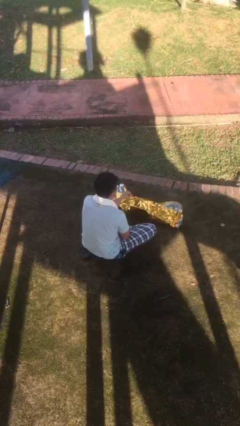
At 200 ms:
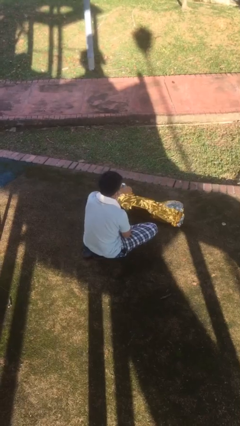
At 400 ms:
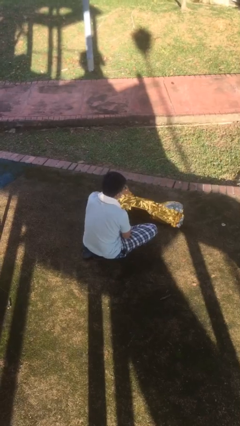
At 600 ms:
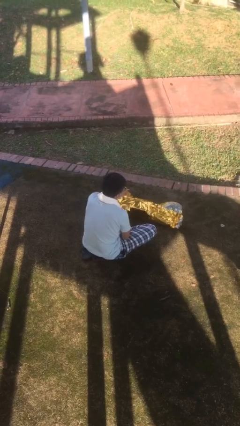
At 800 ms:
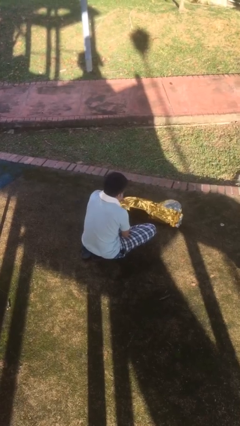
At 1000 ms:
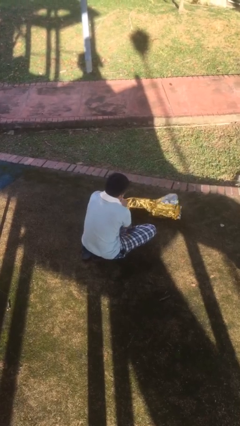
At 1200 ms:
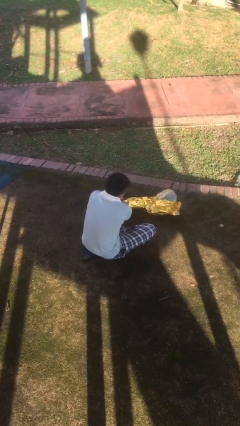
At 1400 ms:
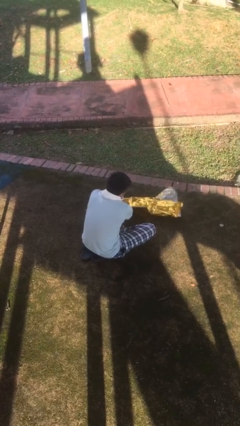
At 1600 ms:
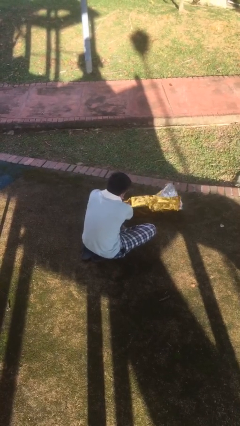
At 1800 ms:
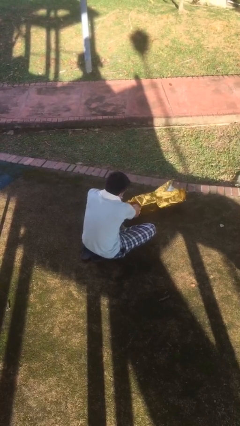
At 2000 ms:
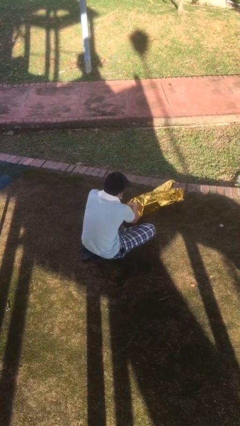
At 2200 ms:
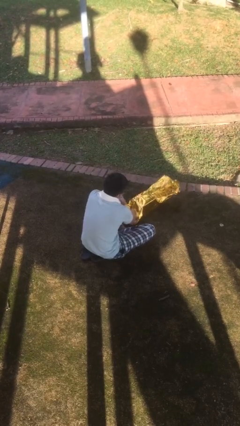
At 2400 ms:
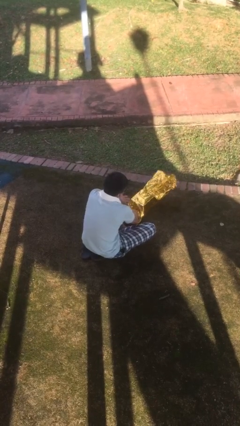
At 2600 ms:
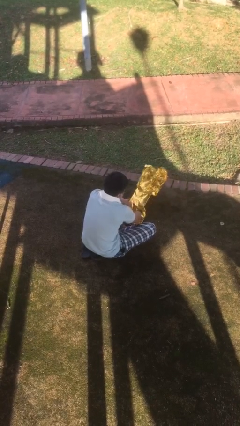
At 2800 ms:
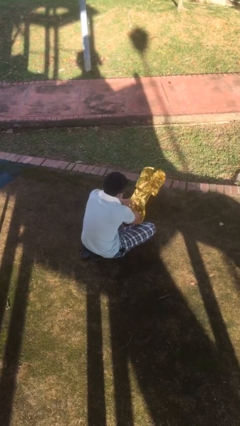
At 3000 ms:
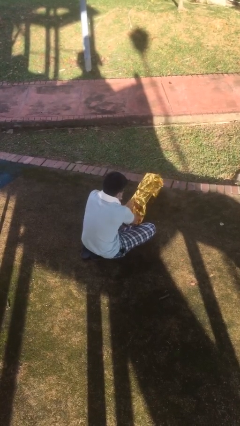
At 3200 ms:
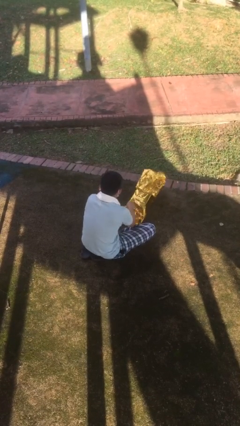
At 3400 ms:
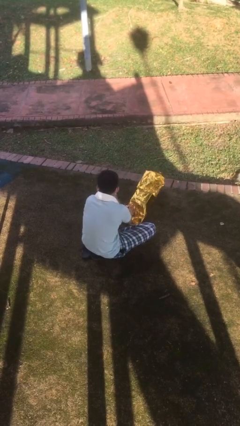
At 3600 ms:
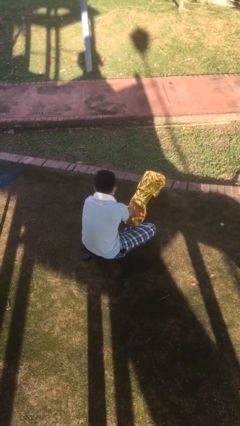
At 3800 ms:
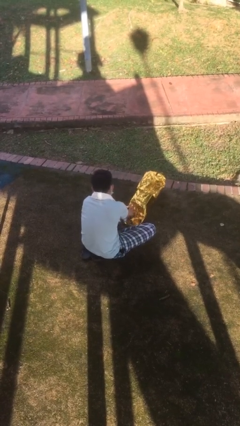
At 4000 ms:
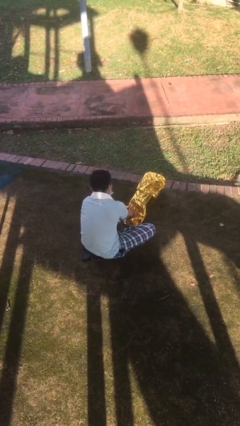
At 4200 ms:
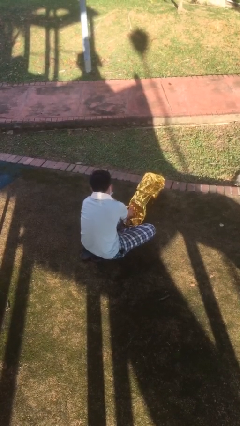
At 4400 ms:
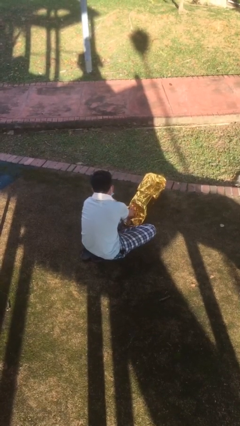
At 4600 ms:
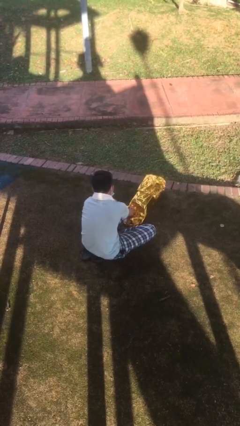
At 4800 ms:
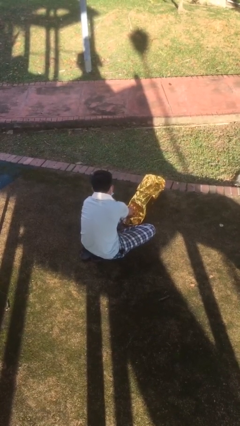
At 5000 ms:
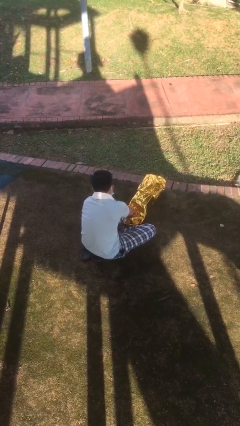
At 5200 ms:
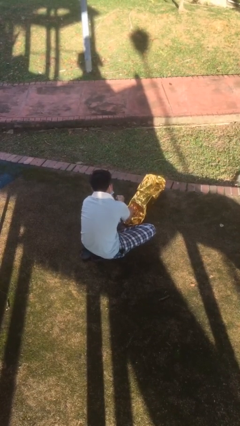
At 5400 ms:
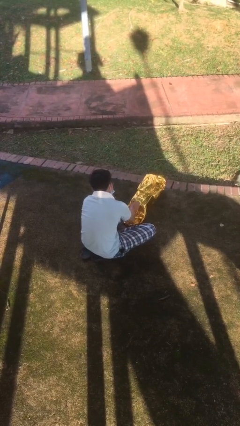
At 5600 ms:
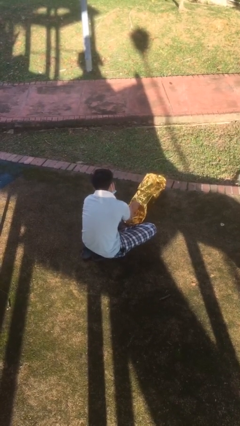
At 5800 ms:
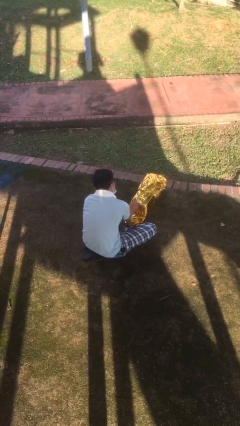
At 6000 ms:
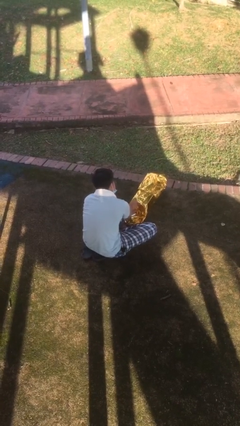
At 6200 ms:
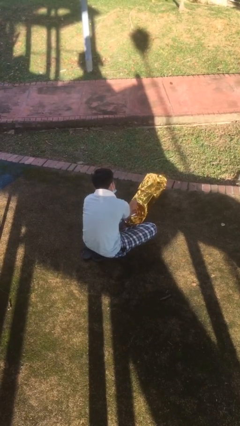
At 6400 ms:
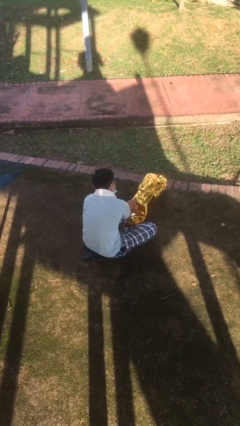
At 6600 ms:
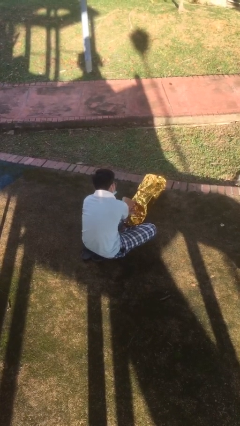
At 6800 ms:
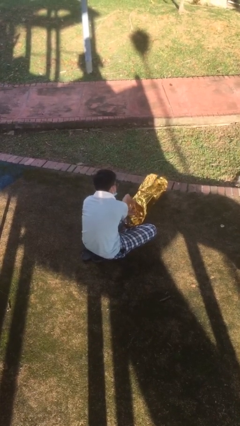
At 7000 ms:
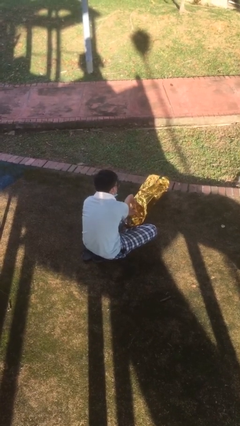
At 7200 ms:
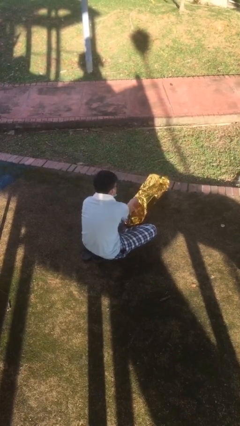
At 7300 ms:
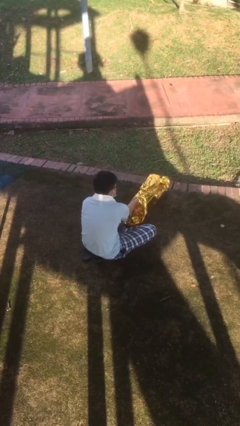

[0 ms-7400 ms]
person wraps box

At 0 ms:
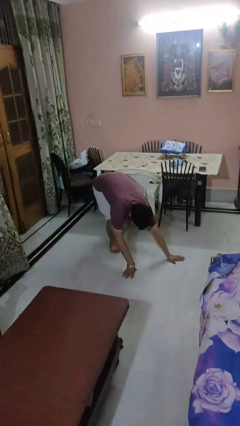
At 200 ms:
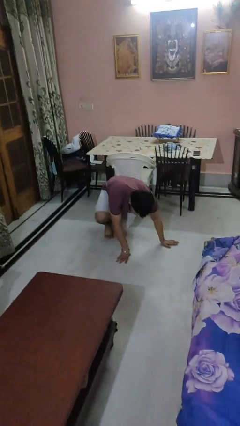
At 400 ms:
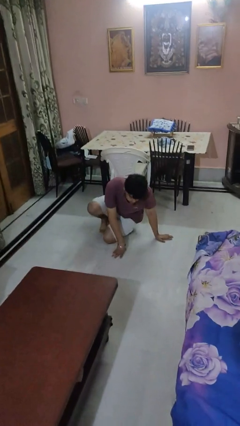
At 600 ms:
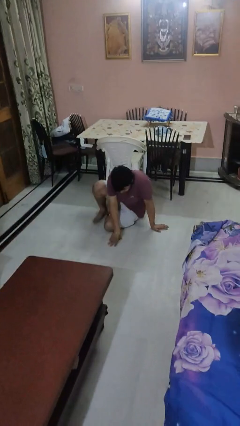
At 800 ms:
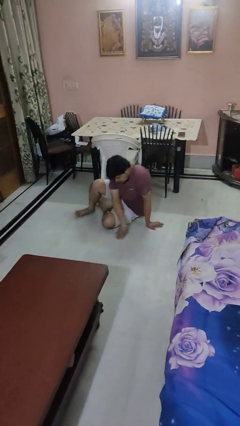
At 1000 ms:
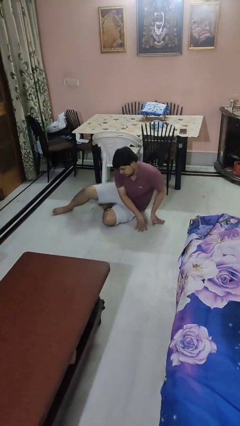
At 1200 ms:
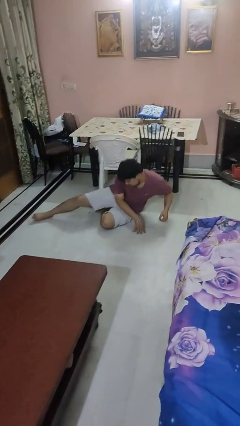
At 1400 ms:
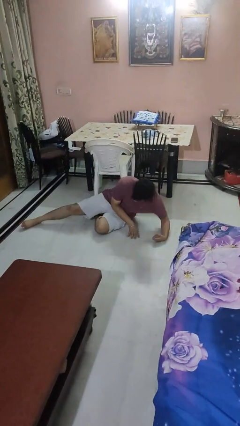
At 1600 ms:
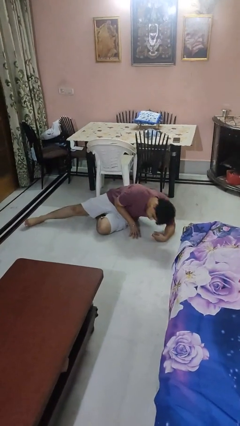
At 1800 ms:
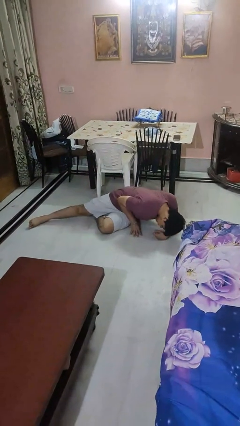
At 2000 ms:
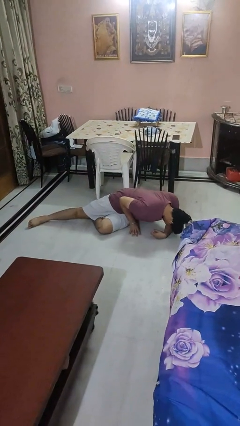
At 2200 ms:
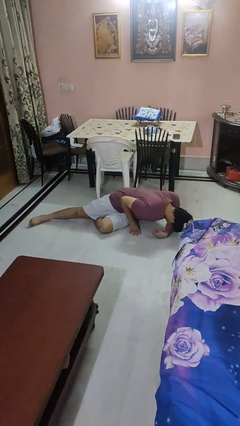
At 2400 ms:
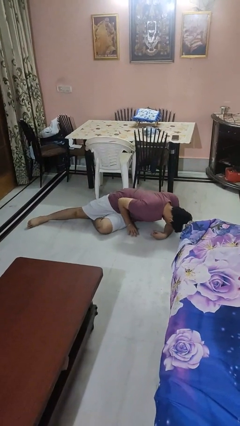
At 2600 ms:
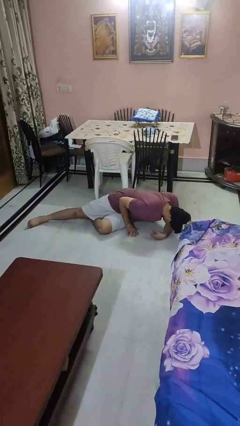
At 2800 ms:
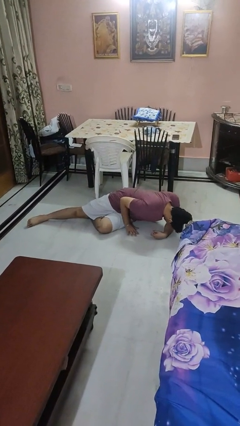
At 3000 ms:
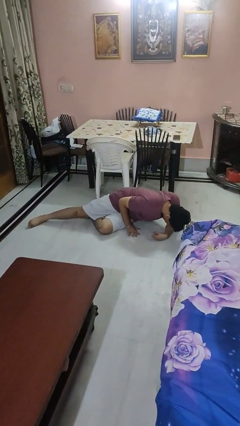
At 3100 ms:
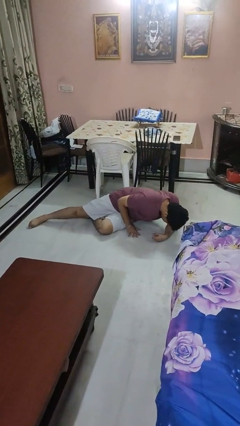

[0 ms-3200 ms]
person lies down on floor

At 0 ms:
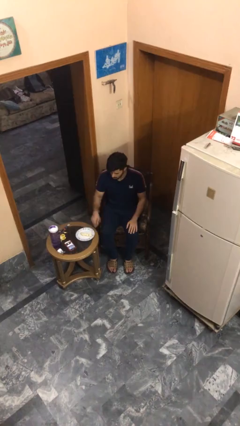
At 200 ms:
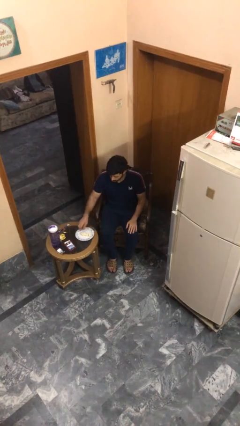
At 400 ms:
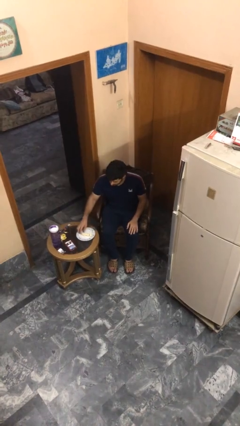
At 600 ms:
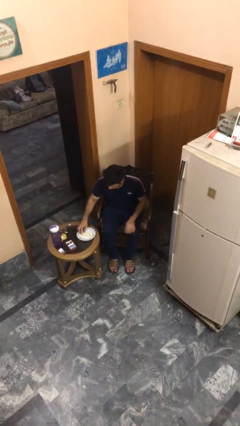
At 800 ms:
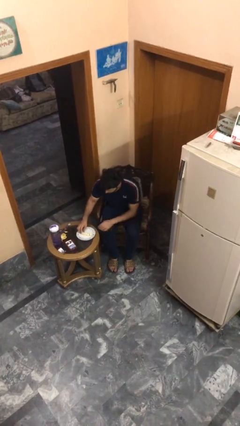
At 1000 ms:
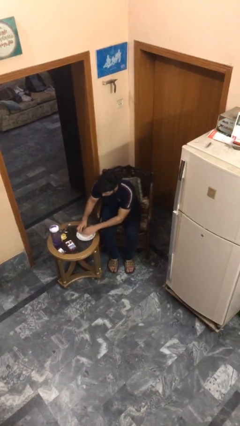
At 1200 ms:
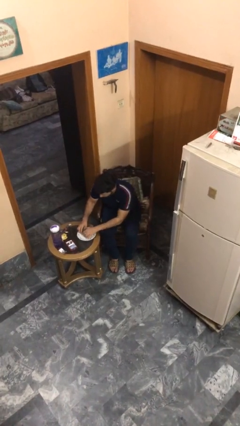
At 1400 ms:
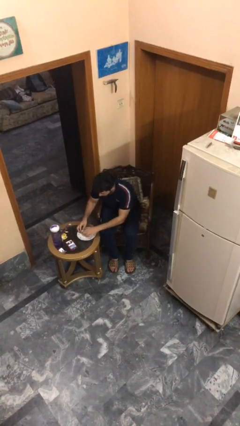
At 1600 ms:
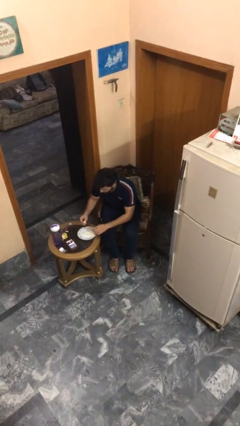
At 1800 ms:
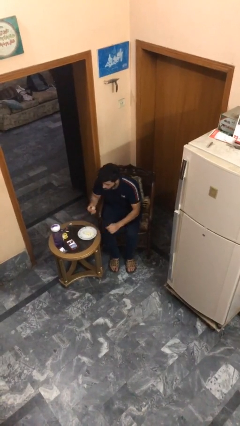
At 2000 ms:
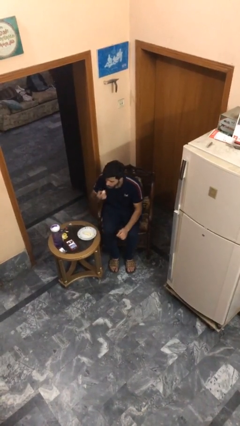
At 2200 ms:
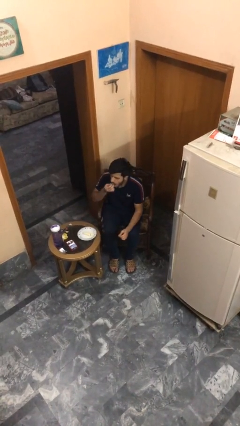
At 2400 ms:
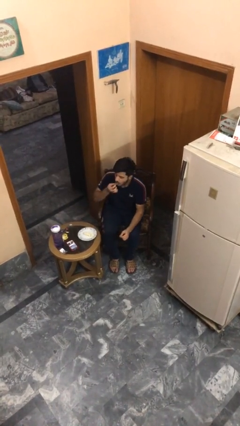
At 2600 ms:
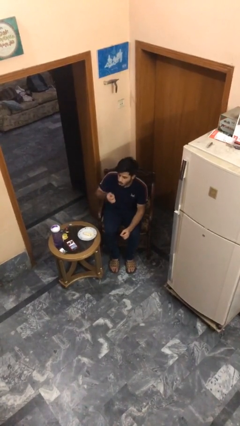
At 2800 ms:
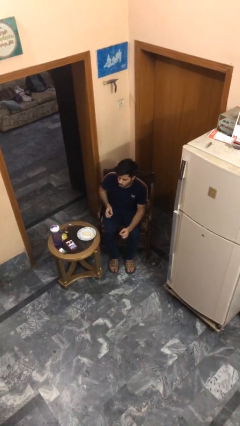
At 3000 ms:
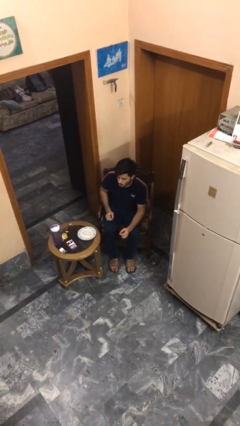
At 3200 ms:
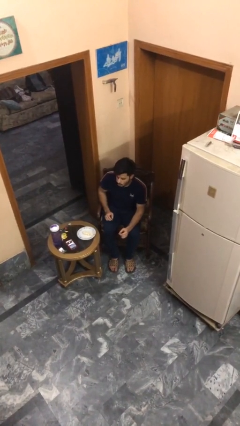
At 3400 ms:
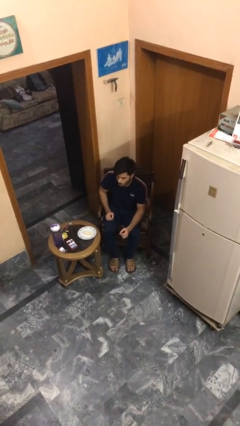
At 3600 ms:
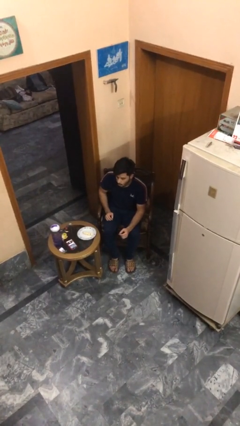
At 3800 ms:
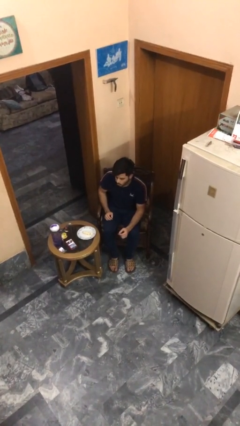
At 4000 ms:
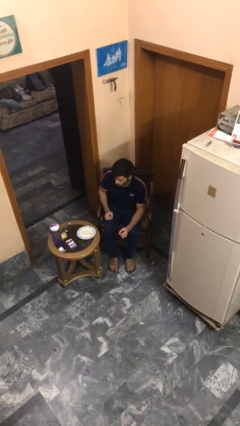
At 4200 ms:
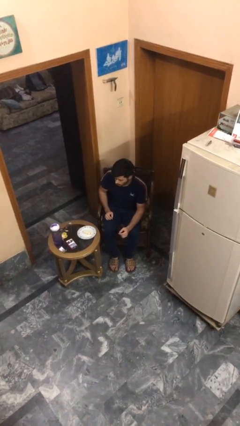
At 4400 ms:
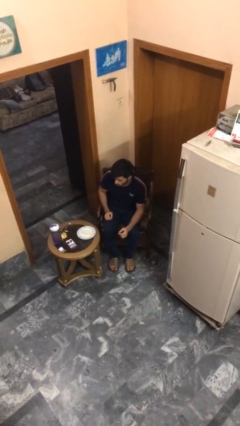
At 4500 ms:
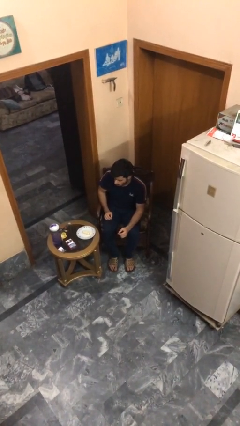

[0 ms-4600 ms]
person eats with hands

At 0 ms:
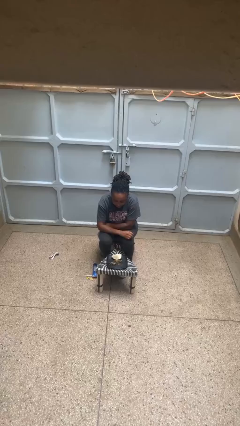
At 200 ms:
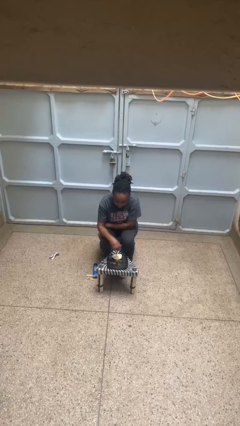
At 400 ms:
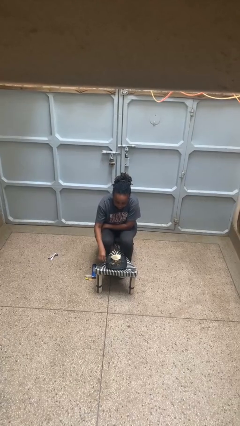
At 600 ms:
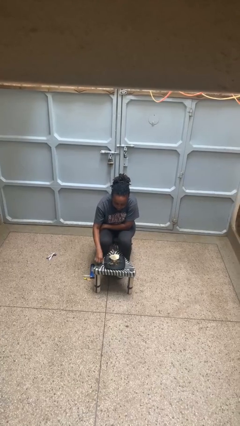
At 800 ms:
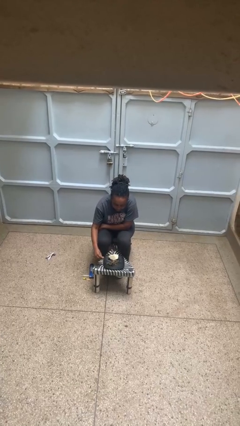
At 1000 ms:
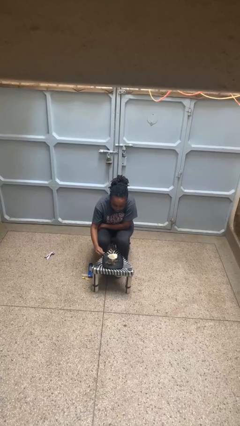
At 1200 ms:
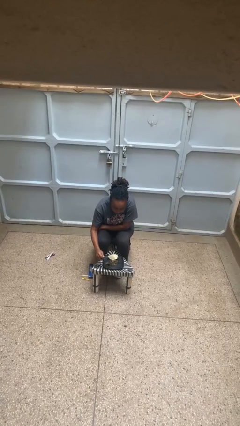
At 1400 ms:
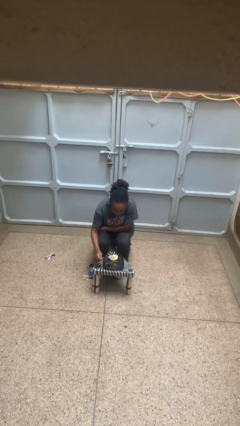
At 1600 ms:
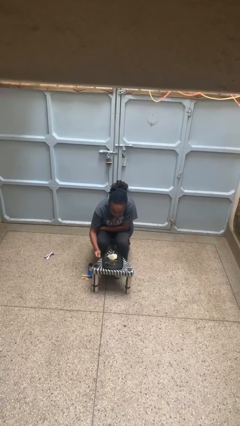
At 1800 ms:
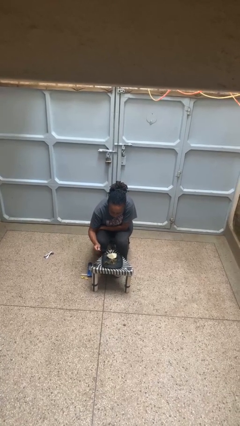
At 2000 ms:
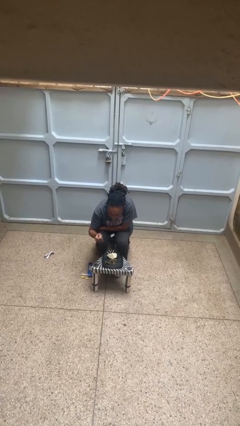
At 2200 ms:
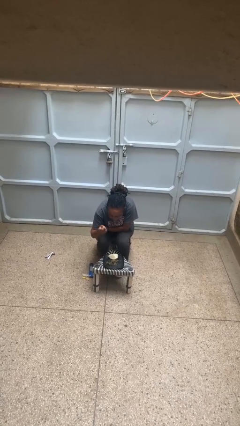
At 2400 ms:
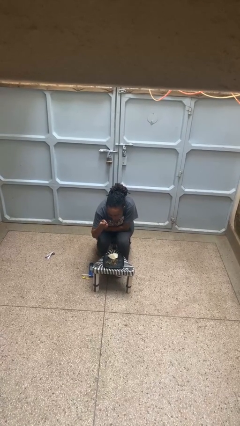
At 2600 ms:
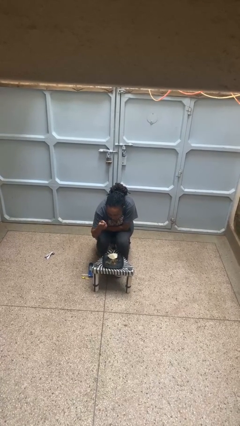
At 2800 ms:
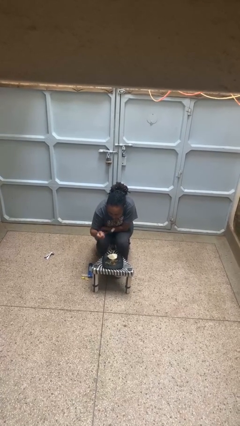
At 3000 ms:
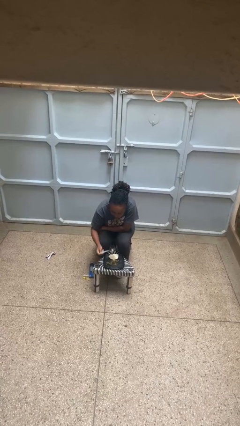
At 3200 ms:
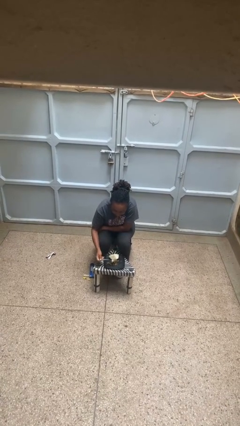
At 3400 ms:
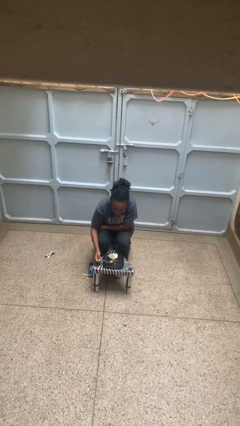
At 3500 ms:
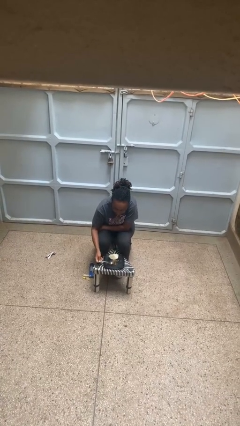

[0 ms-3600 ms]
person eats with utensil
